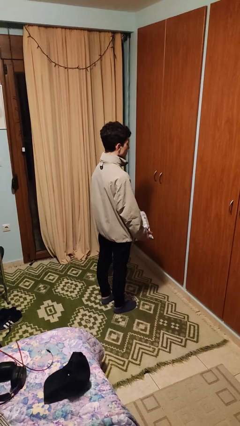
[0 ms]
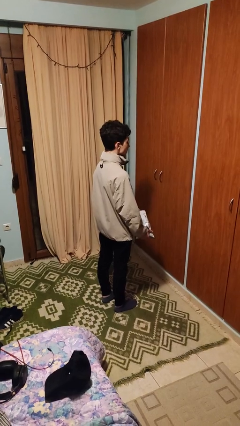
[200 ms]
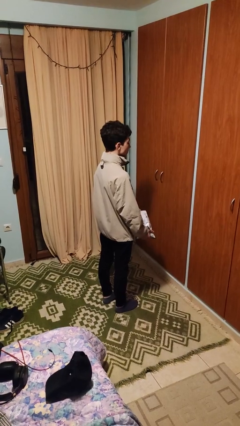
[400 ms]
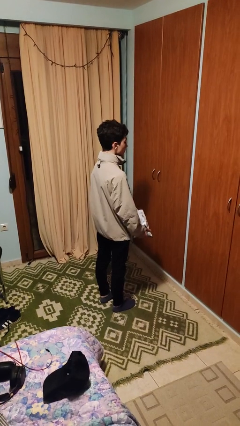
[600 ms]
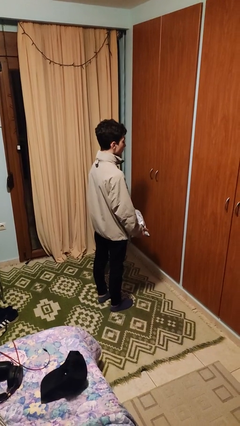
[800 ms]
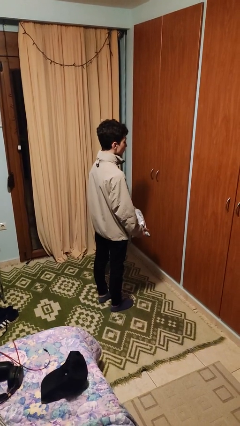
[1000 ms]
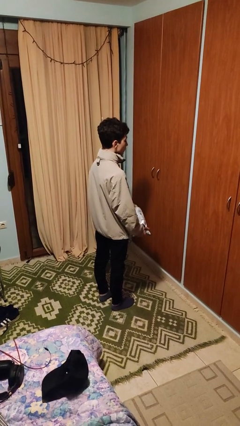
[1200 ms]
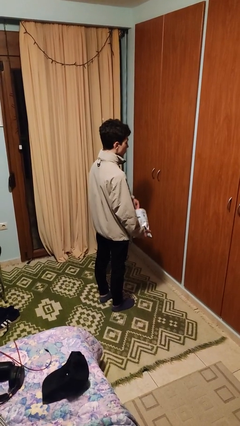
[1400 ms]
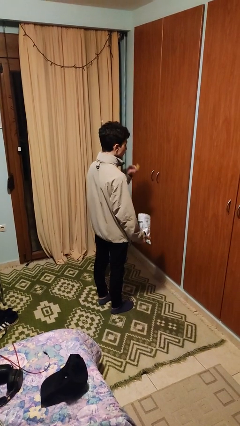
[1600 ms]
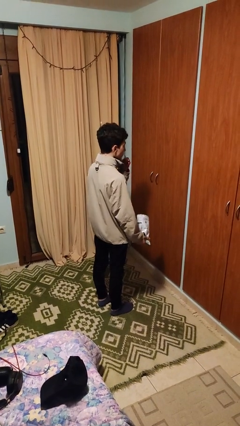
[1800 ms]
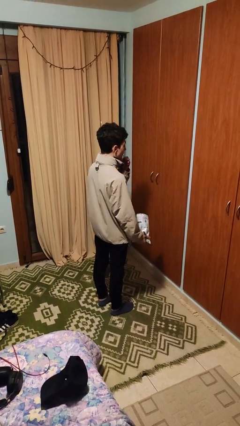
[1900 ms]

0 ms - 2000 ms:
person eats snack from bag

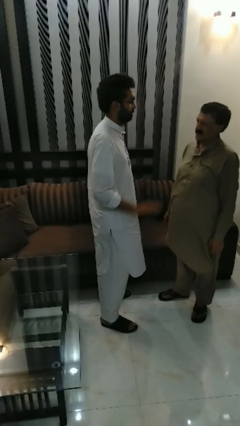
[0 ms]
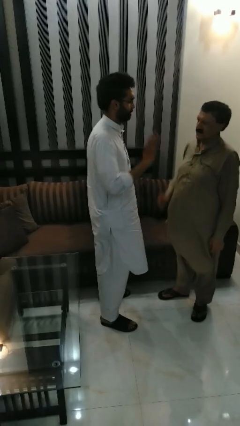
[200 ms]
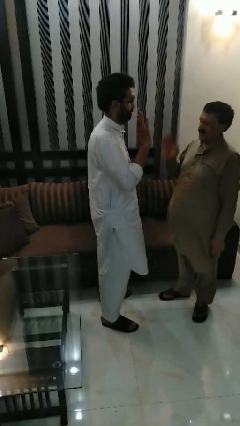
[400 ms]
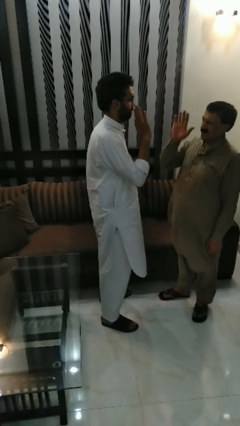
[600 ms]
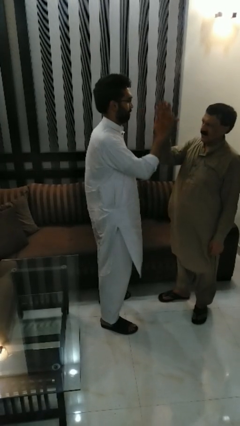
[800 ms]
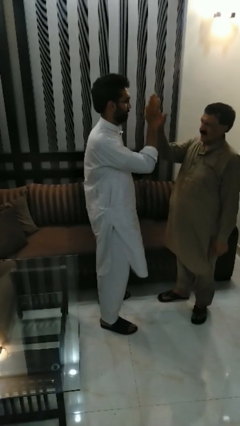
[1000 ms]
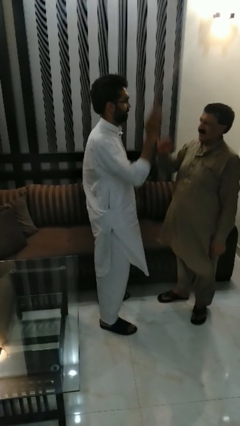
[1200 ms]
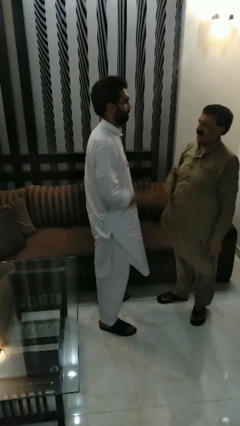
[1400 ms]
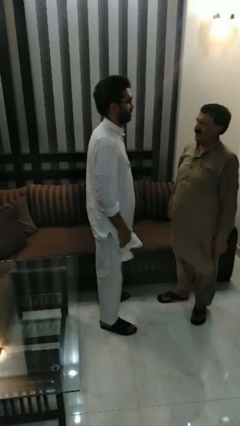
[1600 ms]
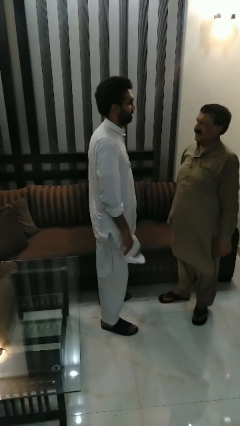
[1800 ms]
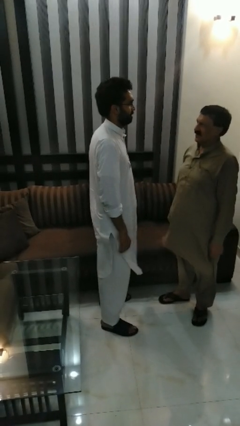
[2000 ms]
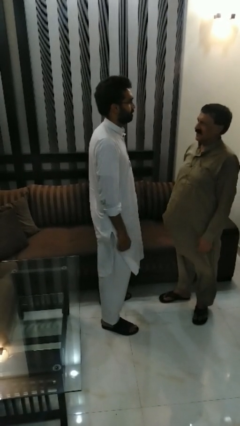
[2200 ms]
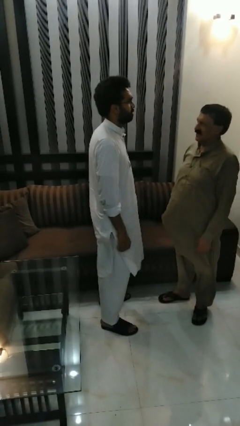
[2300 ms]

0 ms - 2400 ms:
person highfives hand

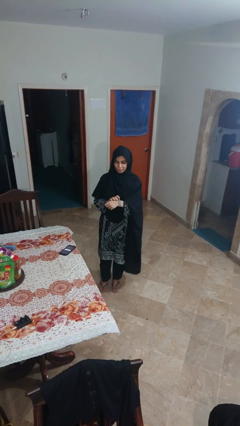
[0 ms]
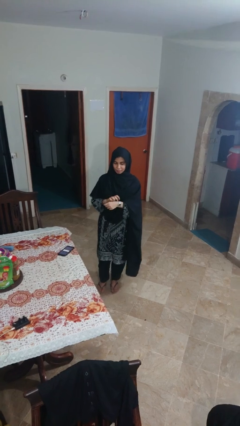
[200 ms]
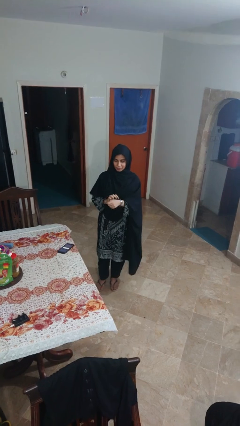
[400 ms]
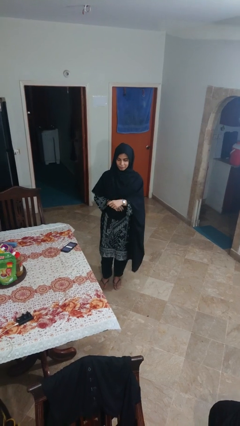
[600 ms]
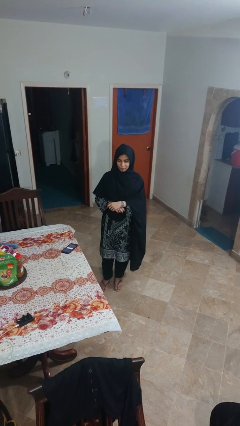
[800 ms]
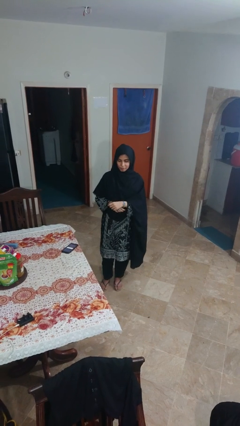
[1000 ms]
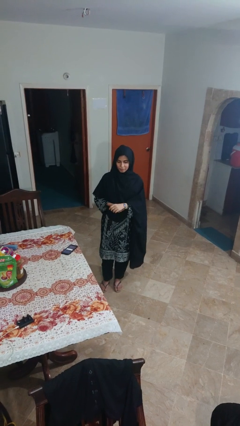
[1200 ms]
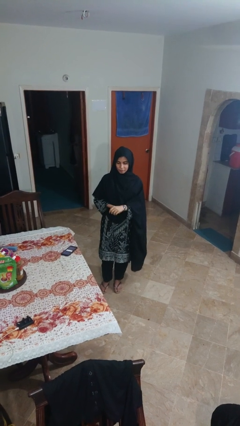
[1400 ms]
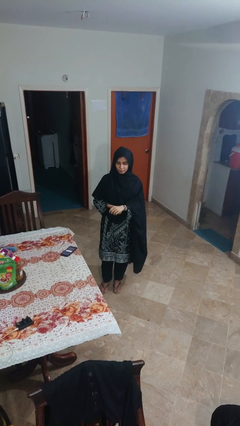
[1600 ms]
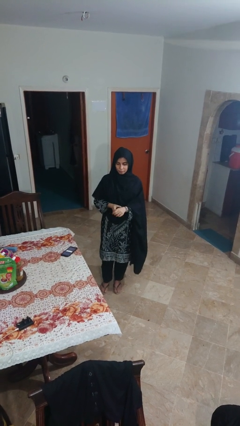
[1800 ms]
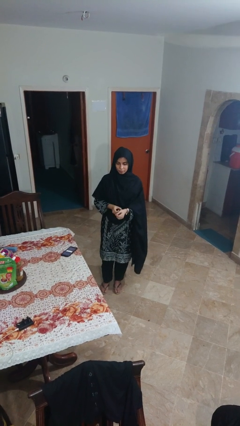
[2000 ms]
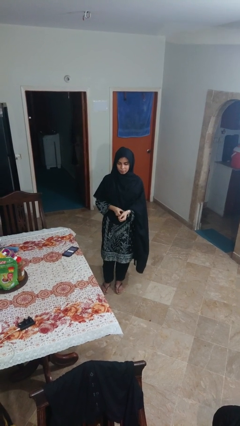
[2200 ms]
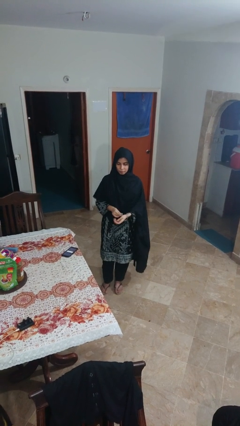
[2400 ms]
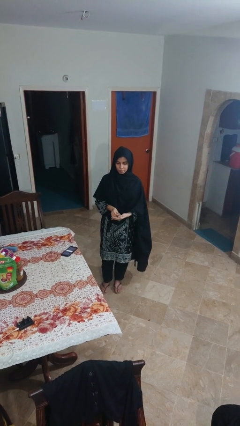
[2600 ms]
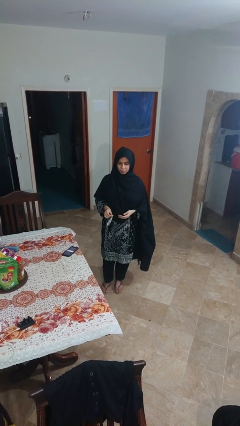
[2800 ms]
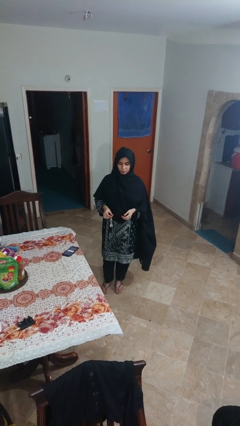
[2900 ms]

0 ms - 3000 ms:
person takes off wristwatch

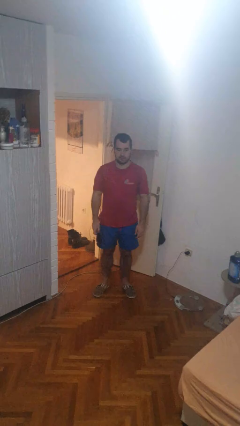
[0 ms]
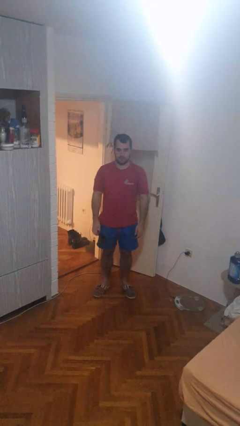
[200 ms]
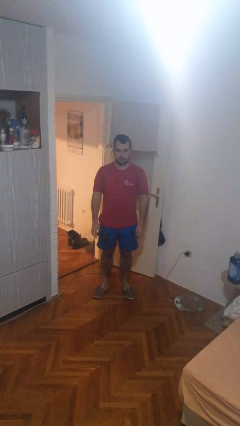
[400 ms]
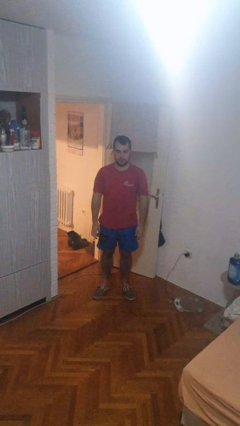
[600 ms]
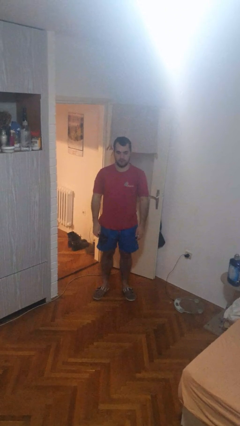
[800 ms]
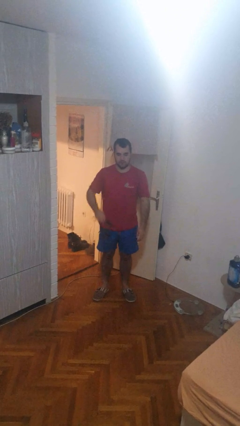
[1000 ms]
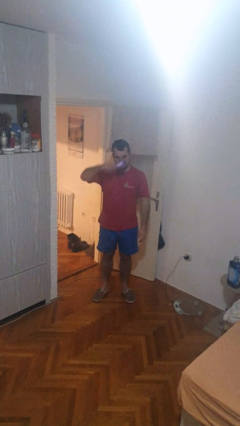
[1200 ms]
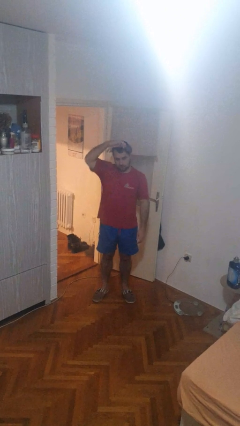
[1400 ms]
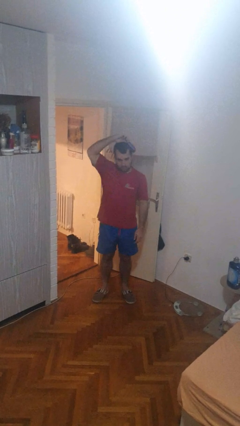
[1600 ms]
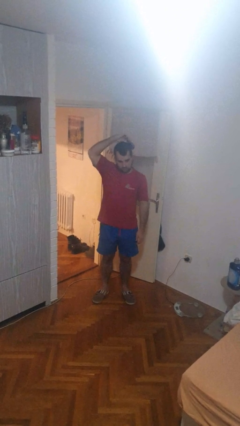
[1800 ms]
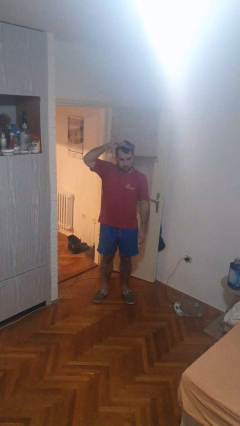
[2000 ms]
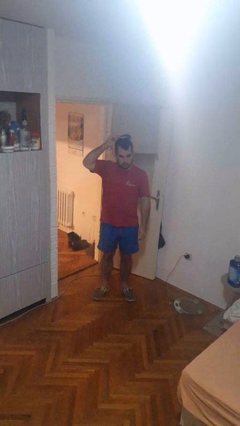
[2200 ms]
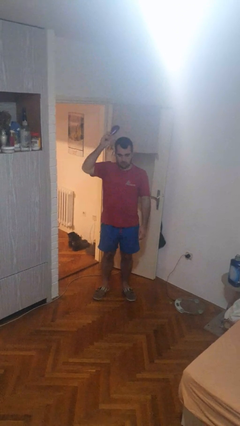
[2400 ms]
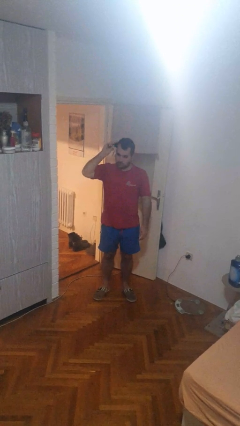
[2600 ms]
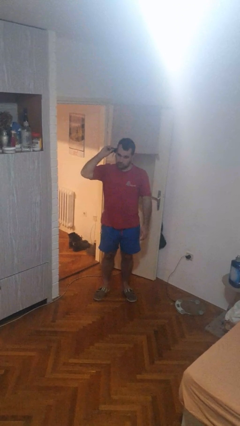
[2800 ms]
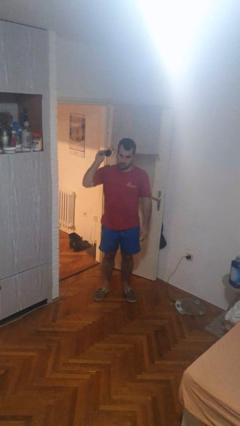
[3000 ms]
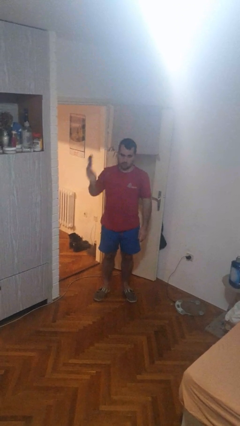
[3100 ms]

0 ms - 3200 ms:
person brushes hair

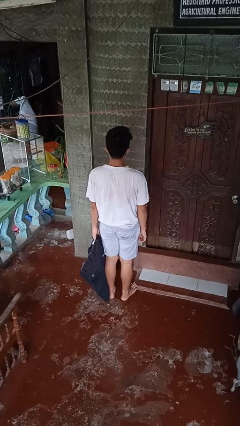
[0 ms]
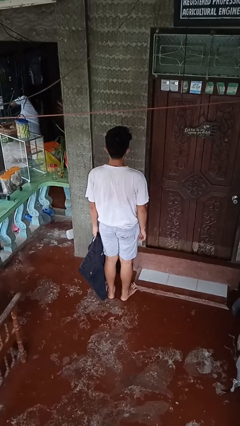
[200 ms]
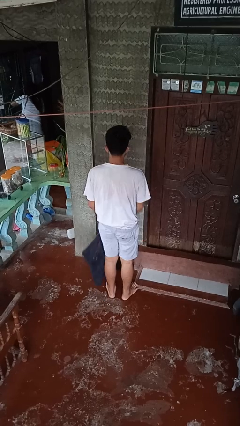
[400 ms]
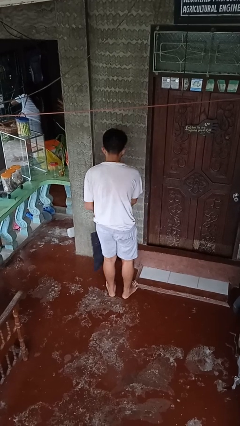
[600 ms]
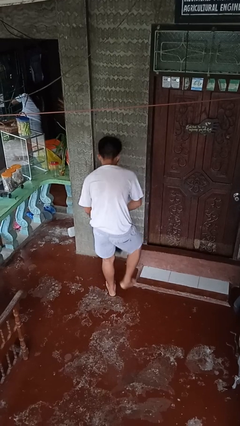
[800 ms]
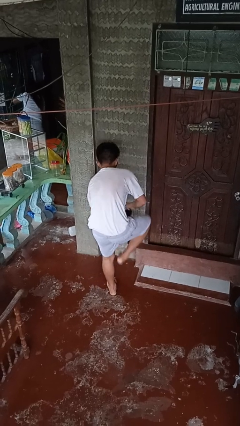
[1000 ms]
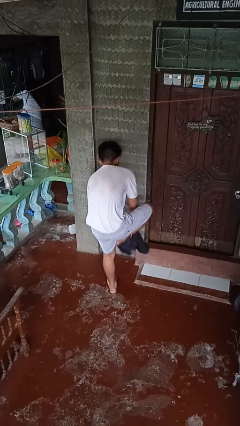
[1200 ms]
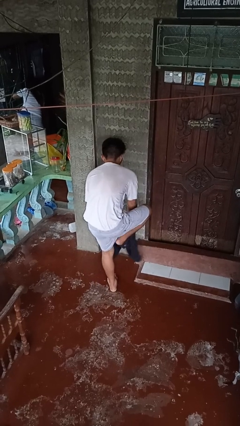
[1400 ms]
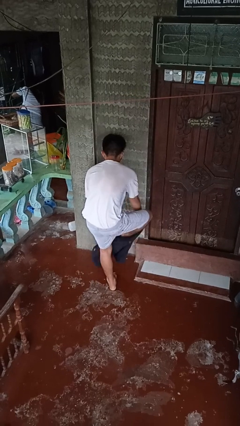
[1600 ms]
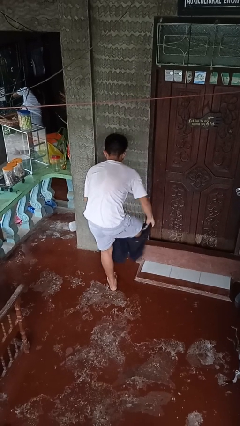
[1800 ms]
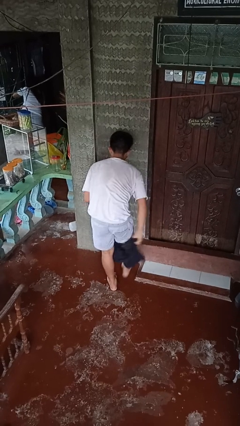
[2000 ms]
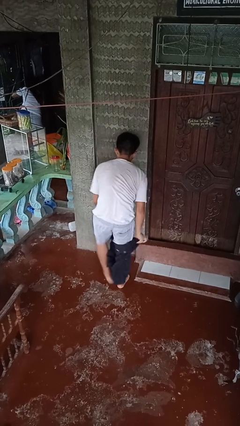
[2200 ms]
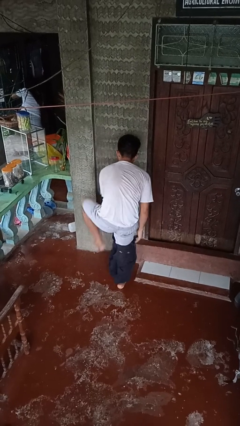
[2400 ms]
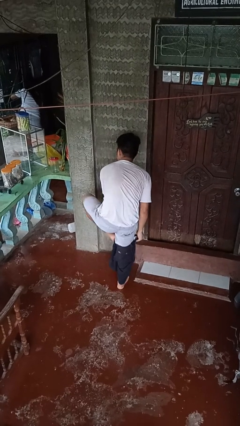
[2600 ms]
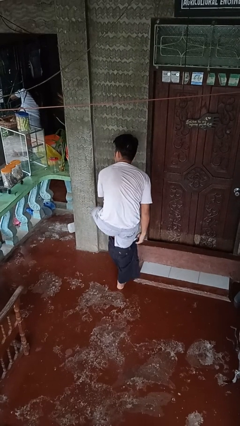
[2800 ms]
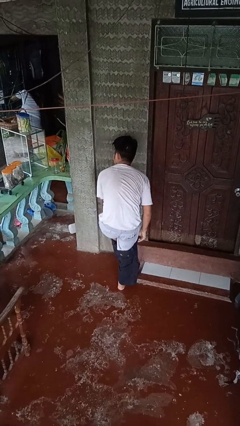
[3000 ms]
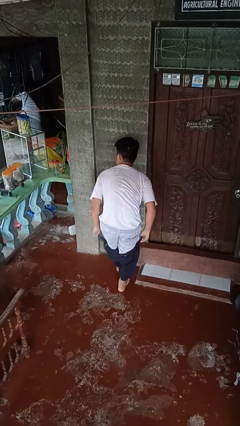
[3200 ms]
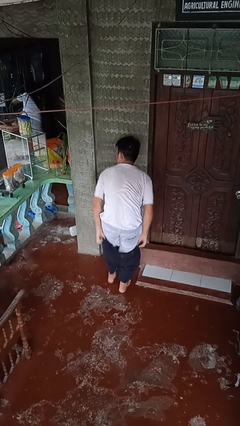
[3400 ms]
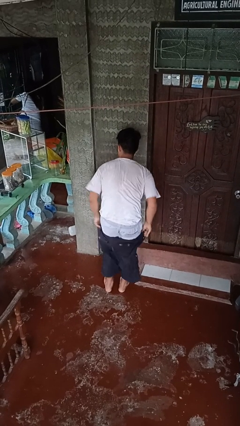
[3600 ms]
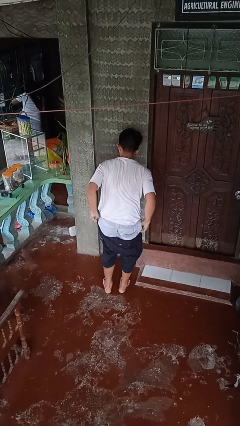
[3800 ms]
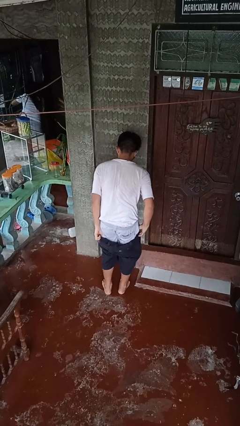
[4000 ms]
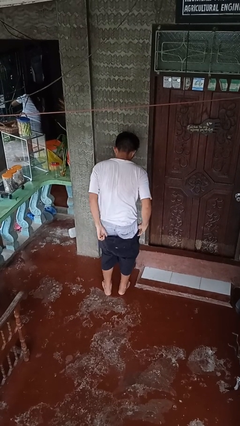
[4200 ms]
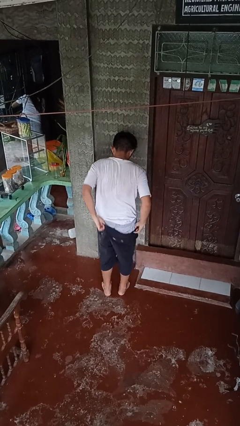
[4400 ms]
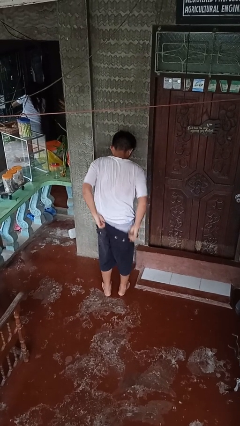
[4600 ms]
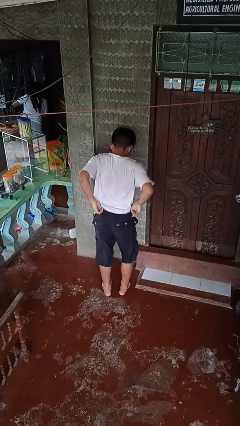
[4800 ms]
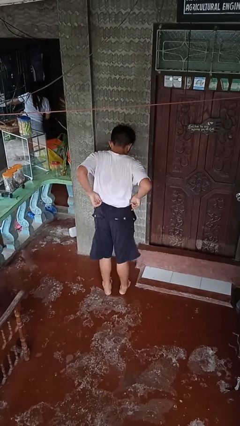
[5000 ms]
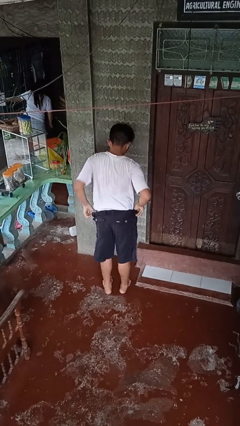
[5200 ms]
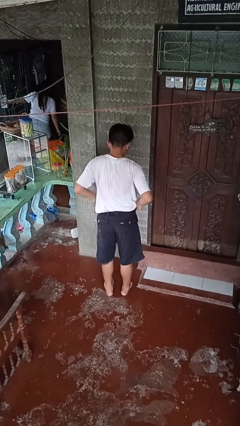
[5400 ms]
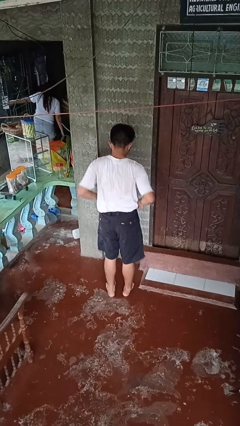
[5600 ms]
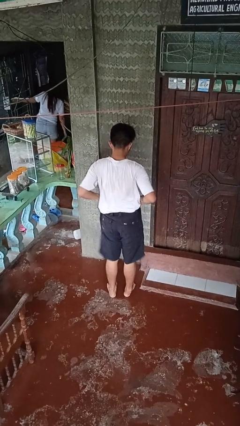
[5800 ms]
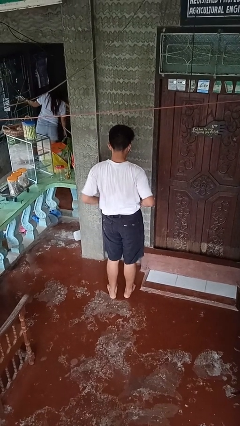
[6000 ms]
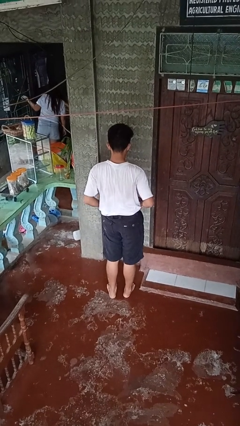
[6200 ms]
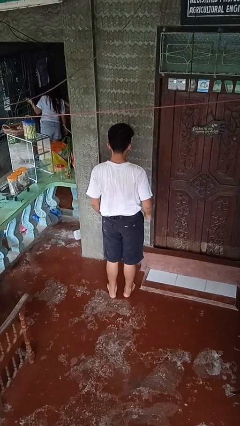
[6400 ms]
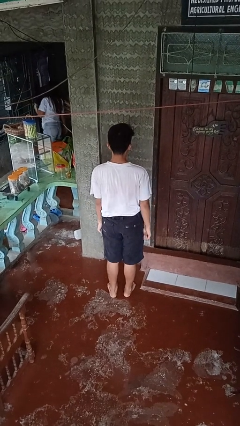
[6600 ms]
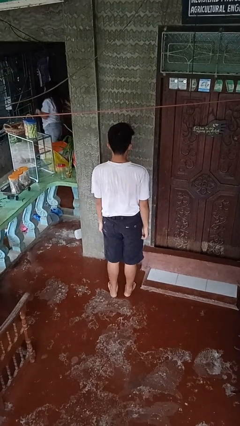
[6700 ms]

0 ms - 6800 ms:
person puts on pants
